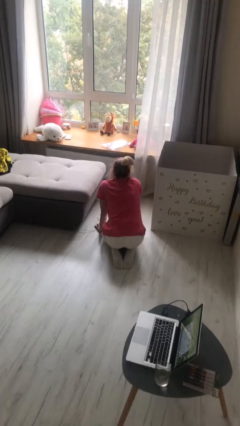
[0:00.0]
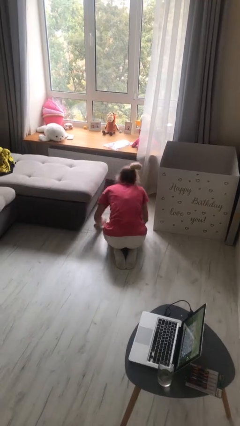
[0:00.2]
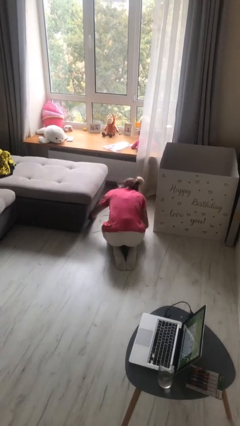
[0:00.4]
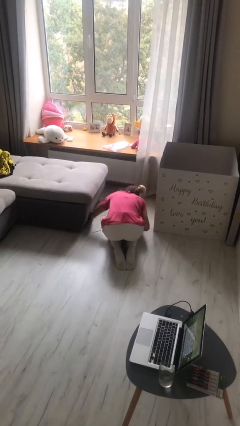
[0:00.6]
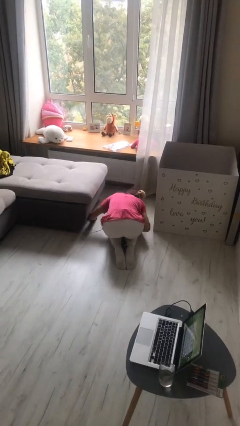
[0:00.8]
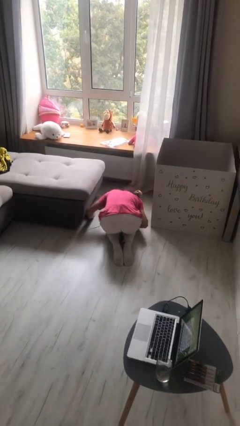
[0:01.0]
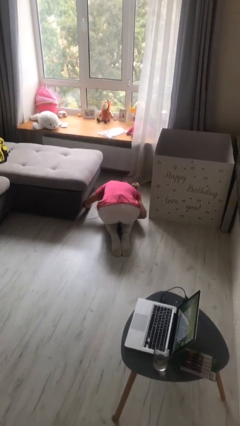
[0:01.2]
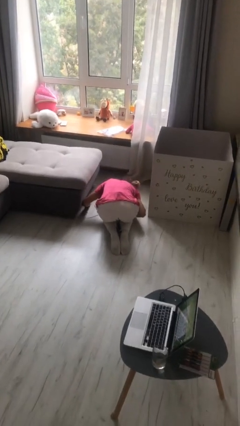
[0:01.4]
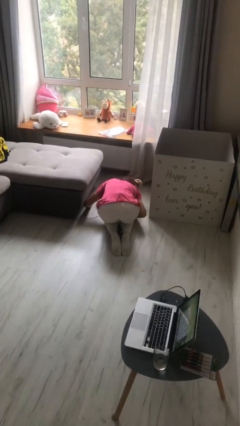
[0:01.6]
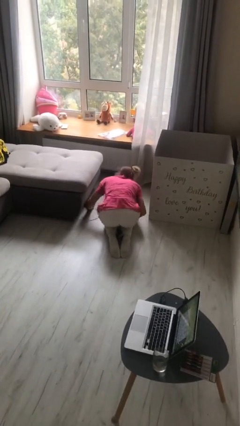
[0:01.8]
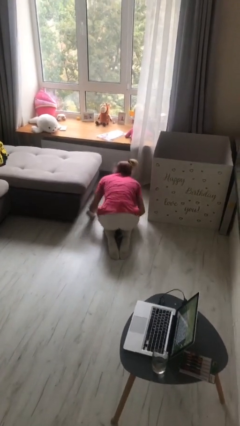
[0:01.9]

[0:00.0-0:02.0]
person searches under couch

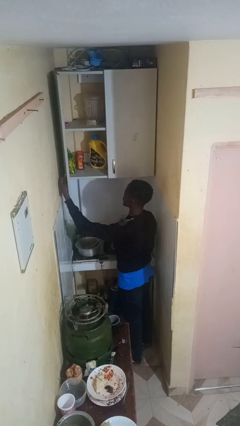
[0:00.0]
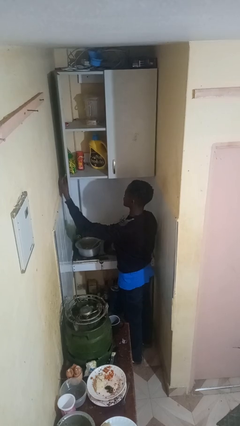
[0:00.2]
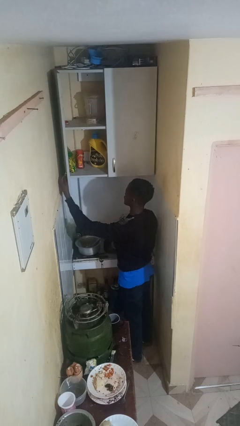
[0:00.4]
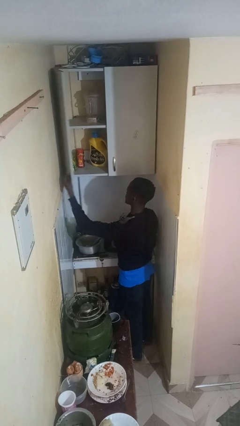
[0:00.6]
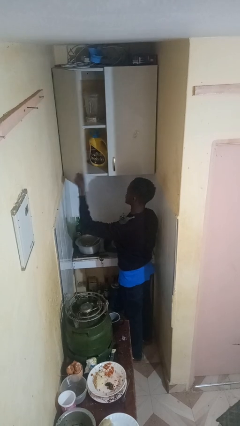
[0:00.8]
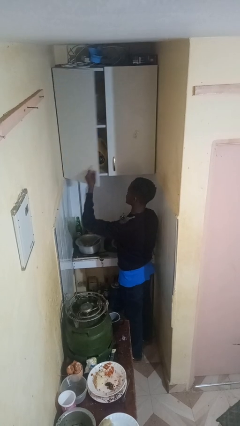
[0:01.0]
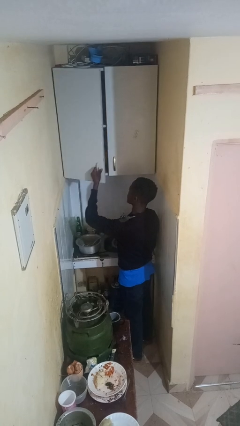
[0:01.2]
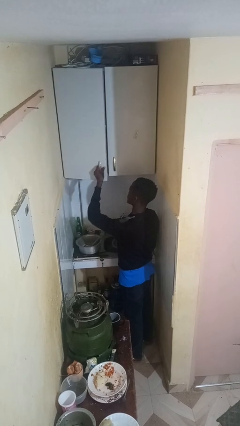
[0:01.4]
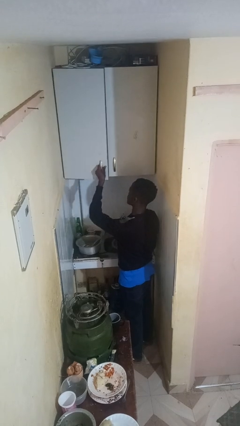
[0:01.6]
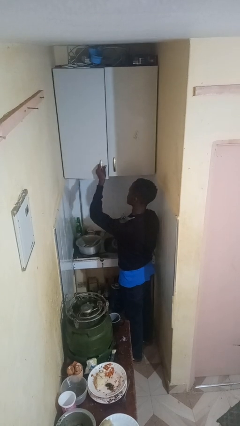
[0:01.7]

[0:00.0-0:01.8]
person closes kitchen drawer

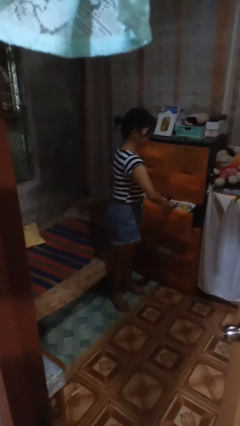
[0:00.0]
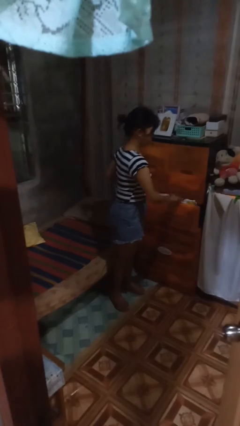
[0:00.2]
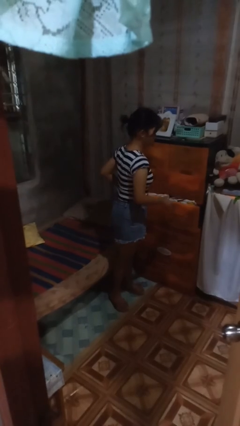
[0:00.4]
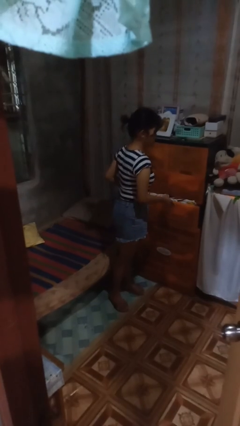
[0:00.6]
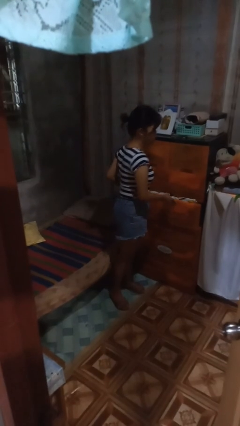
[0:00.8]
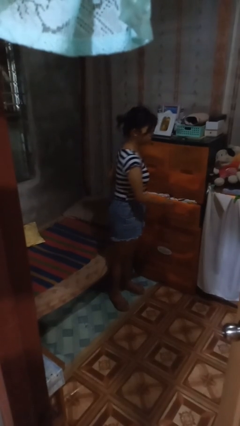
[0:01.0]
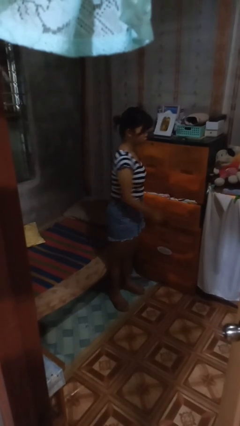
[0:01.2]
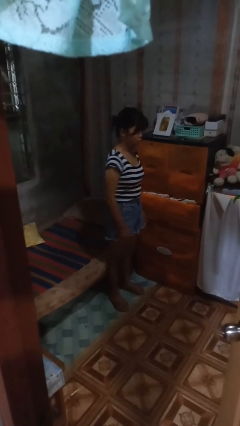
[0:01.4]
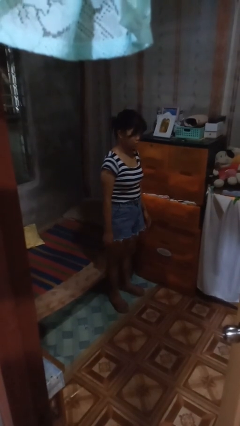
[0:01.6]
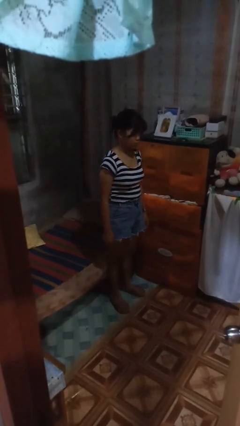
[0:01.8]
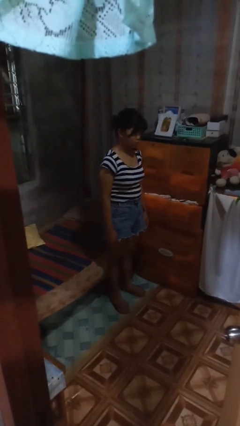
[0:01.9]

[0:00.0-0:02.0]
person closes dresser drawer

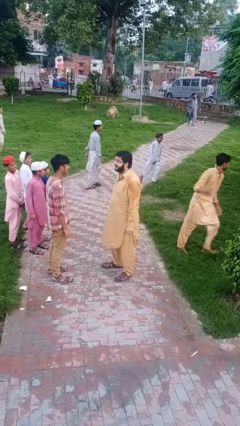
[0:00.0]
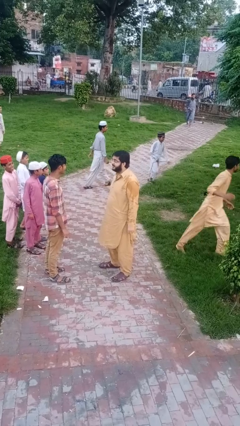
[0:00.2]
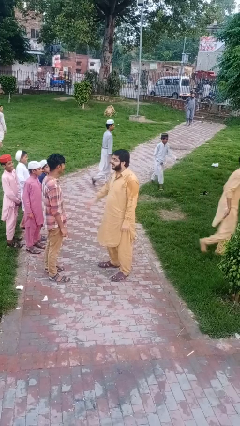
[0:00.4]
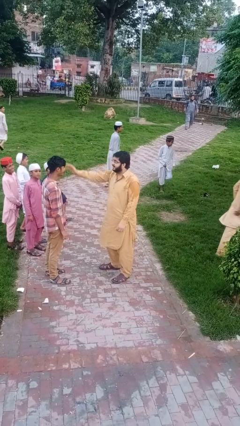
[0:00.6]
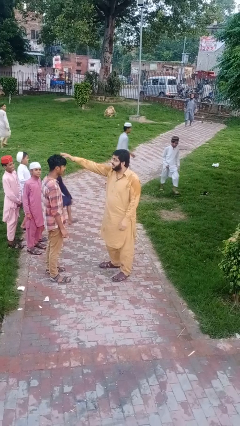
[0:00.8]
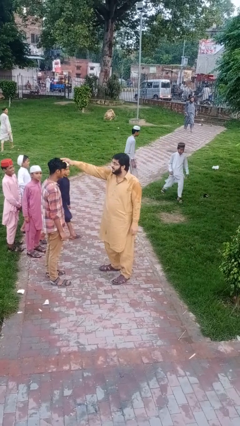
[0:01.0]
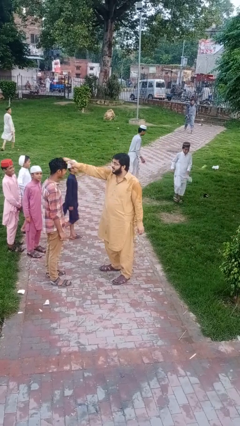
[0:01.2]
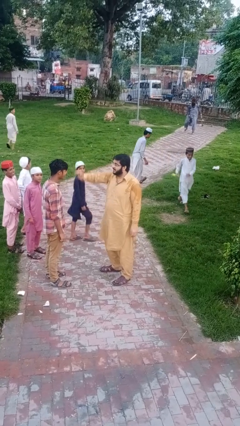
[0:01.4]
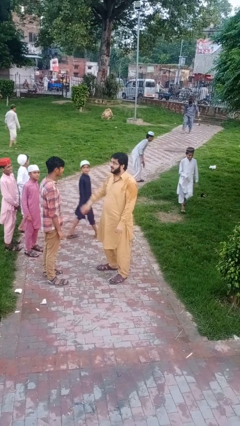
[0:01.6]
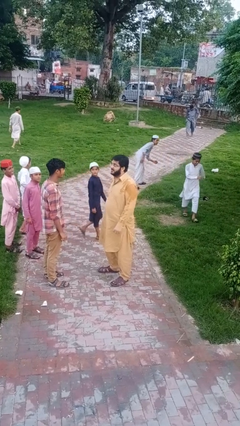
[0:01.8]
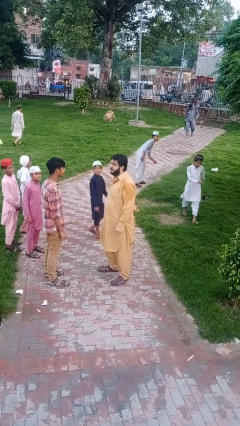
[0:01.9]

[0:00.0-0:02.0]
person grabs person by hair

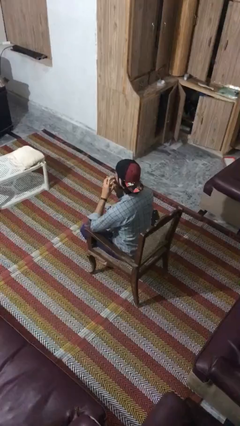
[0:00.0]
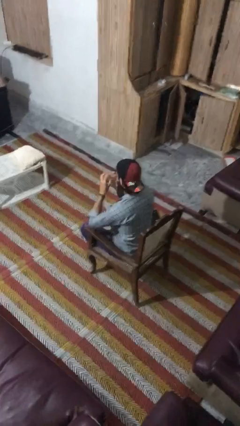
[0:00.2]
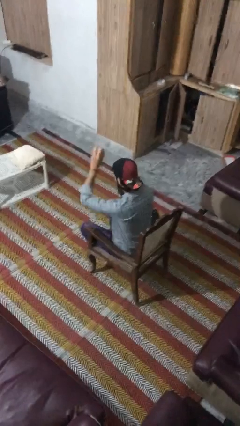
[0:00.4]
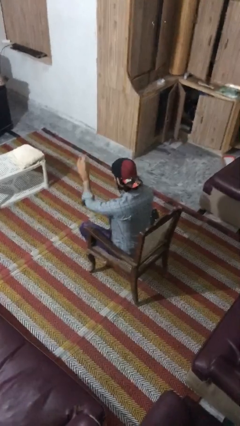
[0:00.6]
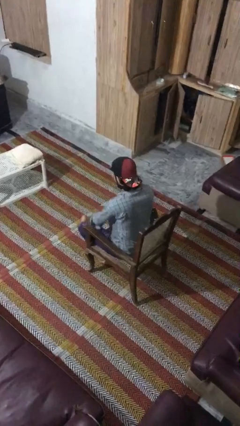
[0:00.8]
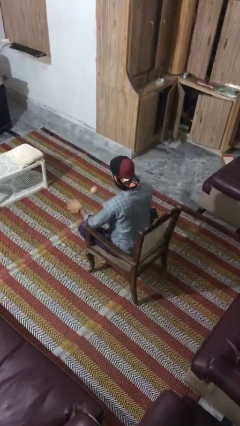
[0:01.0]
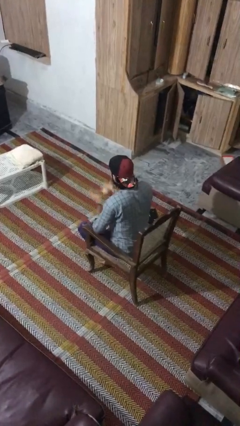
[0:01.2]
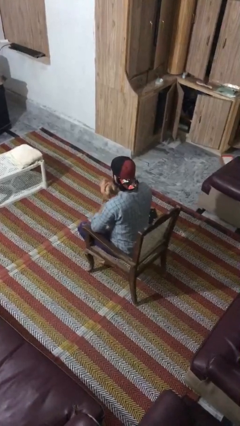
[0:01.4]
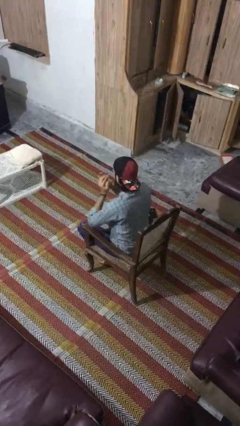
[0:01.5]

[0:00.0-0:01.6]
person bounces ball on floor

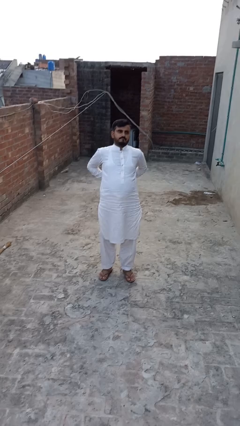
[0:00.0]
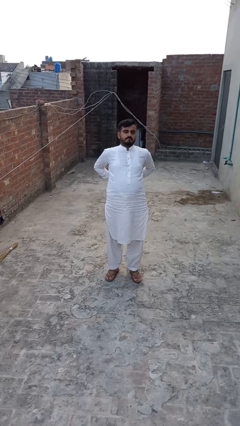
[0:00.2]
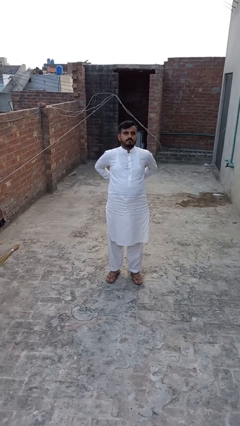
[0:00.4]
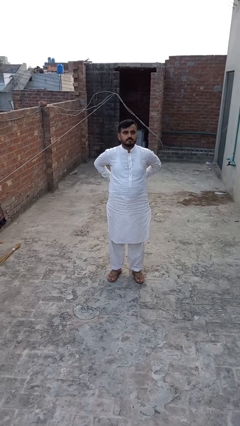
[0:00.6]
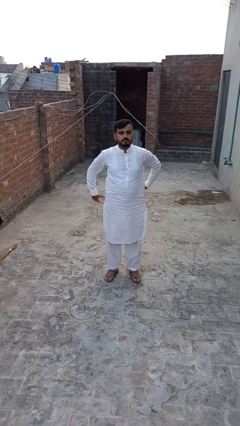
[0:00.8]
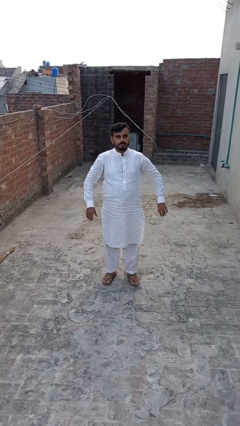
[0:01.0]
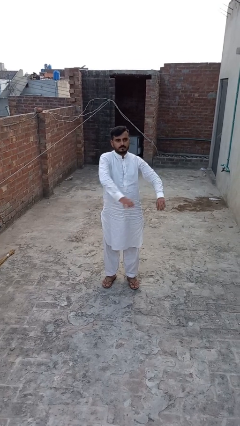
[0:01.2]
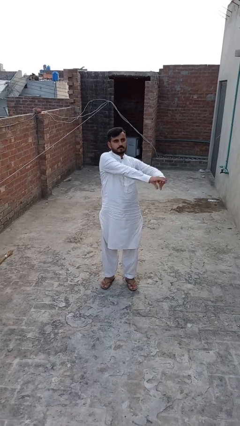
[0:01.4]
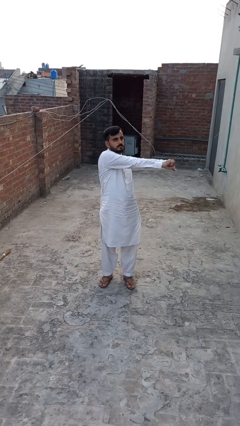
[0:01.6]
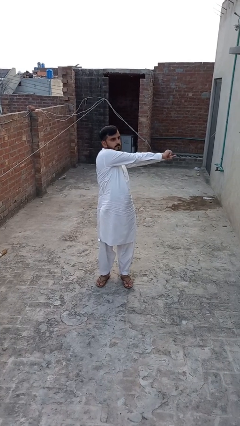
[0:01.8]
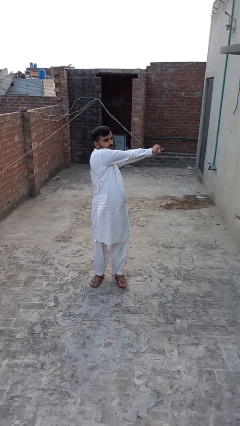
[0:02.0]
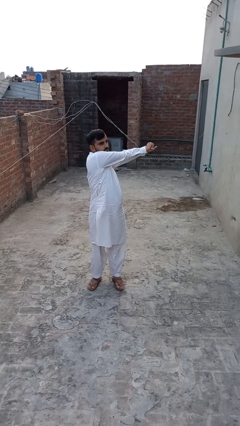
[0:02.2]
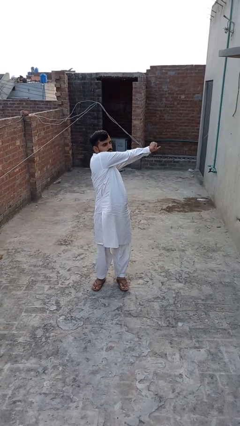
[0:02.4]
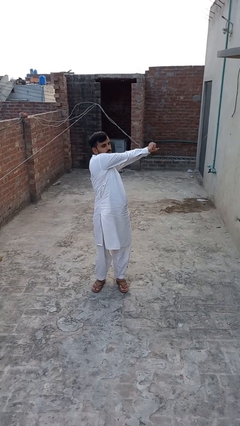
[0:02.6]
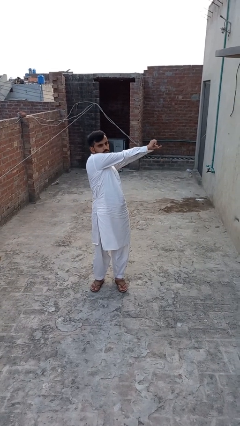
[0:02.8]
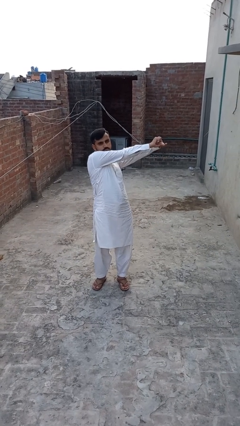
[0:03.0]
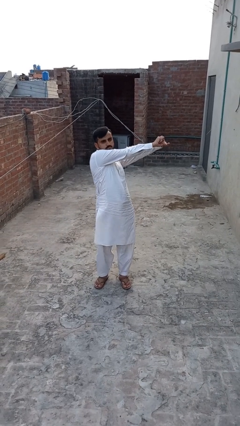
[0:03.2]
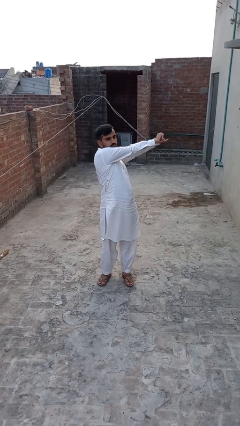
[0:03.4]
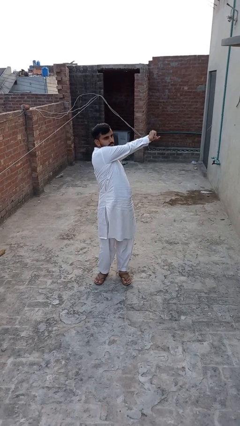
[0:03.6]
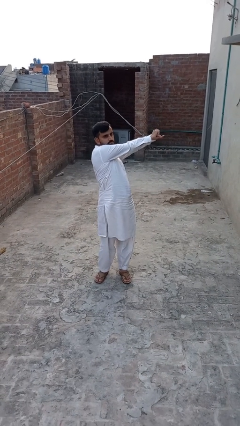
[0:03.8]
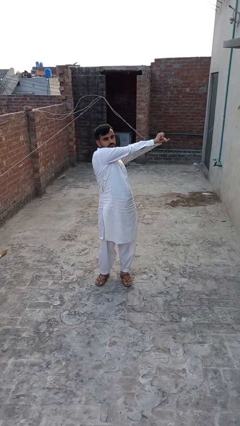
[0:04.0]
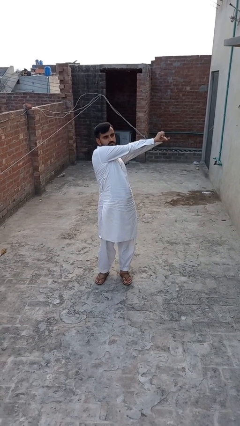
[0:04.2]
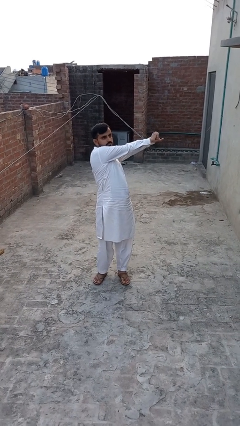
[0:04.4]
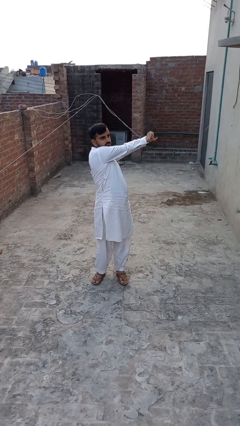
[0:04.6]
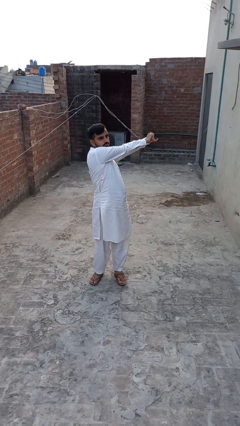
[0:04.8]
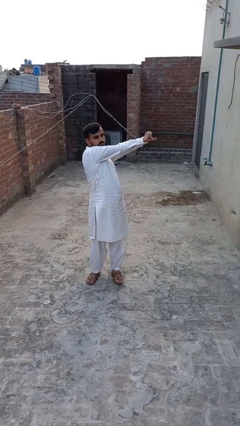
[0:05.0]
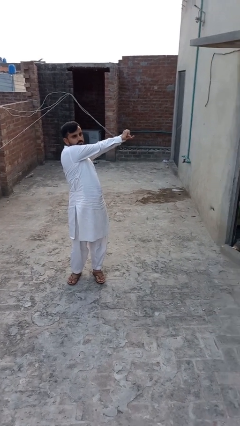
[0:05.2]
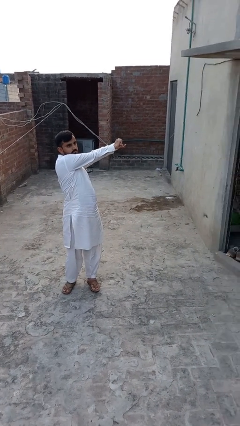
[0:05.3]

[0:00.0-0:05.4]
person stretches arms to side

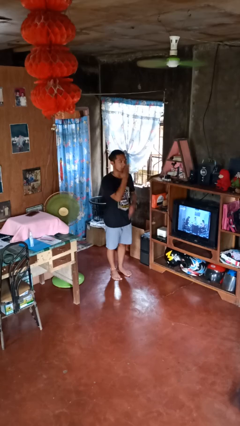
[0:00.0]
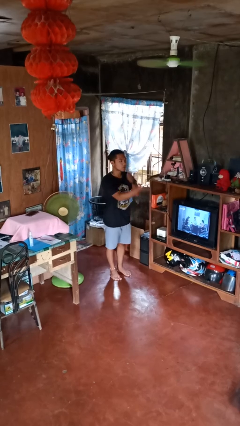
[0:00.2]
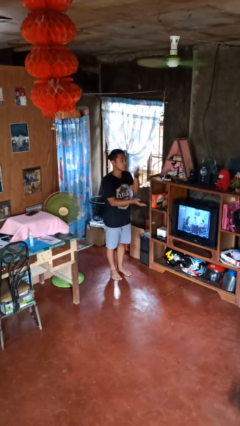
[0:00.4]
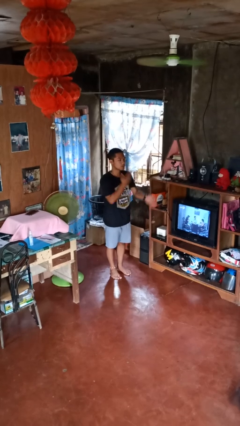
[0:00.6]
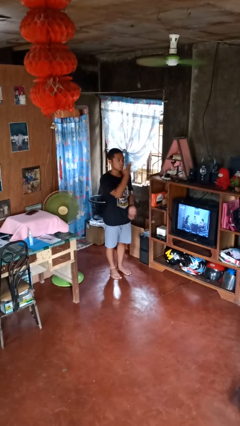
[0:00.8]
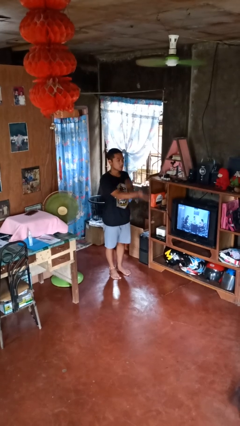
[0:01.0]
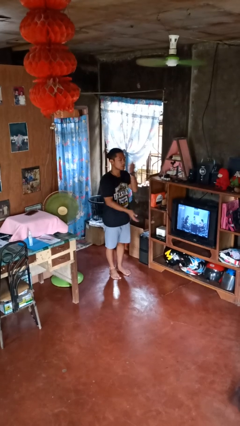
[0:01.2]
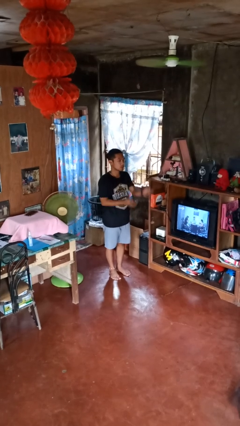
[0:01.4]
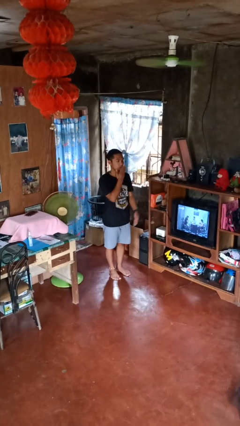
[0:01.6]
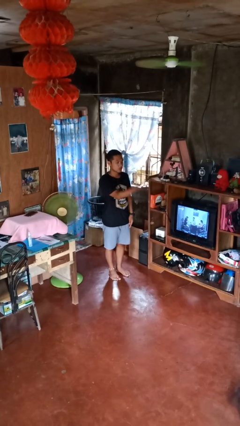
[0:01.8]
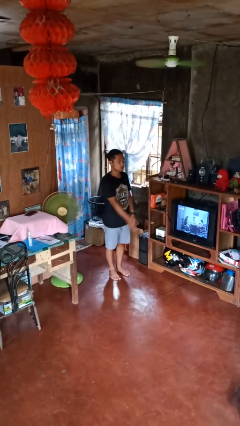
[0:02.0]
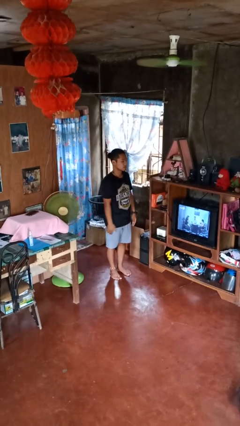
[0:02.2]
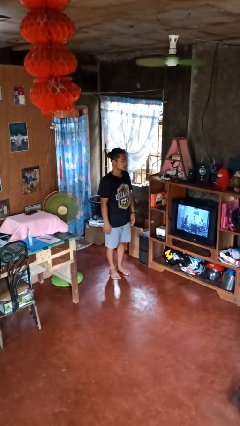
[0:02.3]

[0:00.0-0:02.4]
person gestures blow kiss
